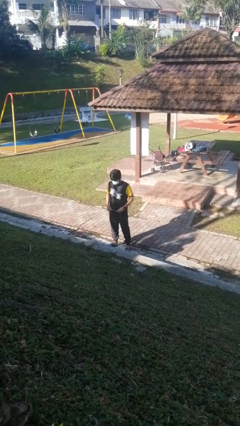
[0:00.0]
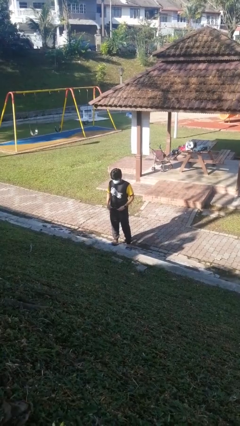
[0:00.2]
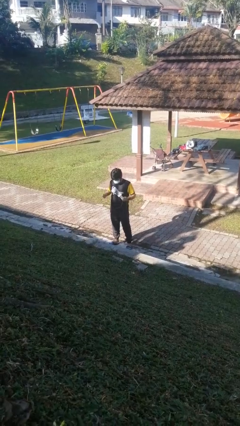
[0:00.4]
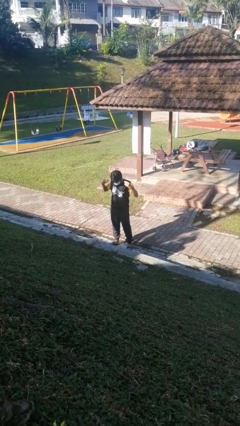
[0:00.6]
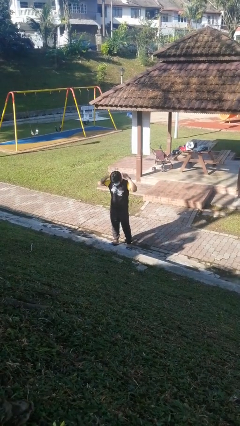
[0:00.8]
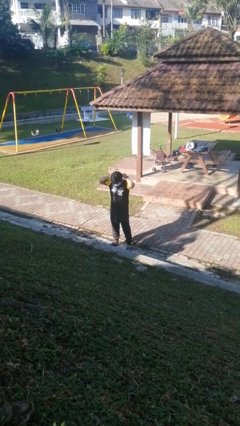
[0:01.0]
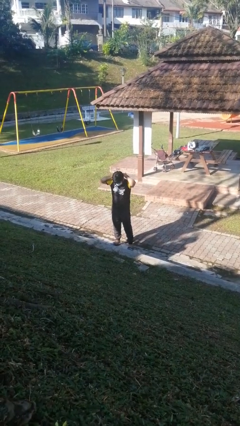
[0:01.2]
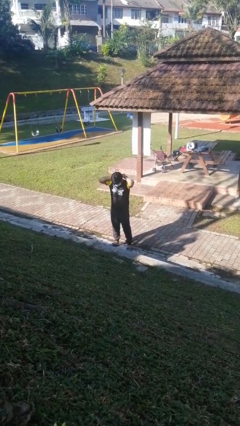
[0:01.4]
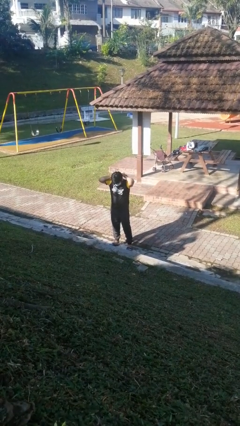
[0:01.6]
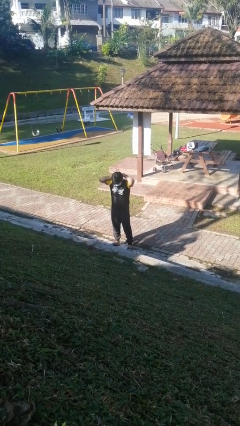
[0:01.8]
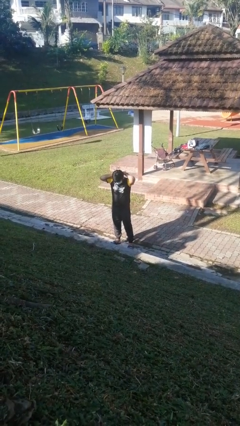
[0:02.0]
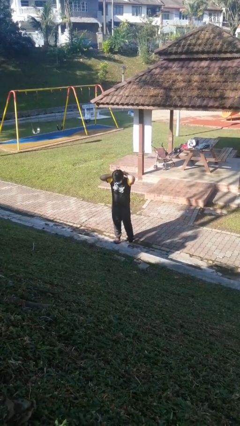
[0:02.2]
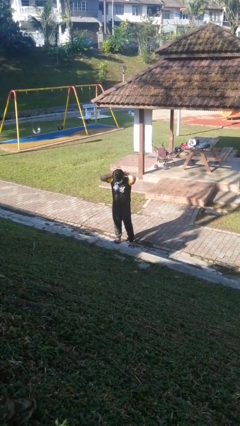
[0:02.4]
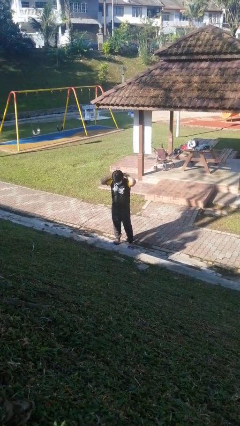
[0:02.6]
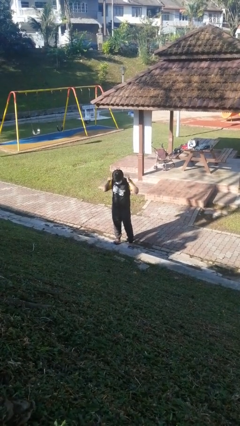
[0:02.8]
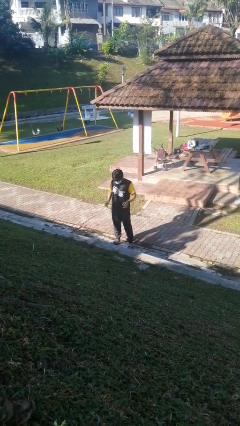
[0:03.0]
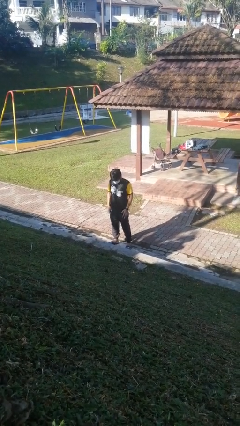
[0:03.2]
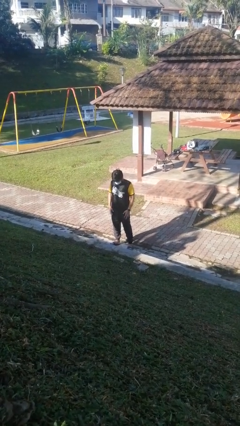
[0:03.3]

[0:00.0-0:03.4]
person puts on necklace

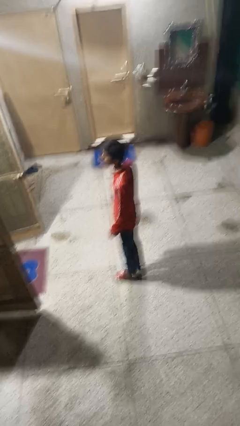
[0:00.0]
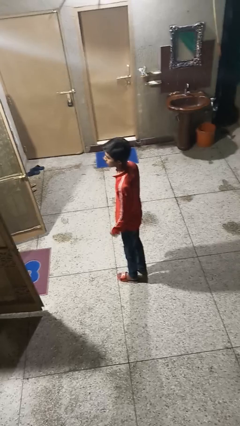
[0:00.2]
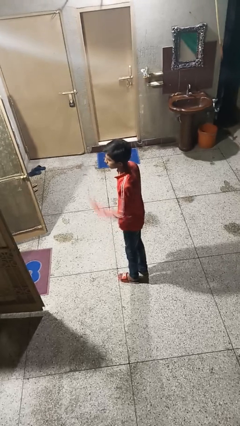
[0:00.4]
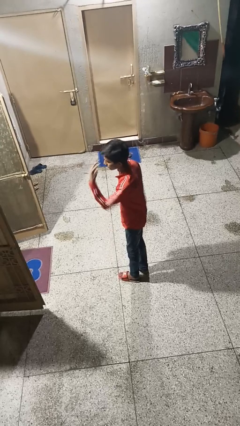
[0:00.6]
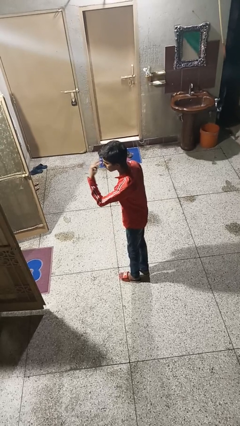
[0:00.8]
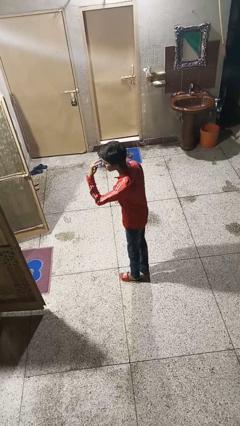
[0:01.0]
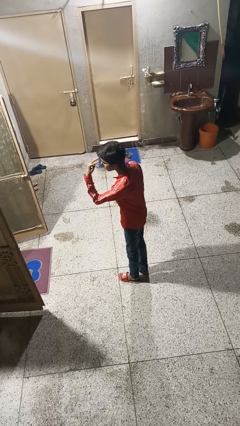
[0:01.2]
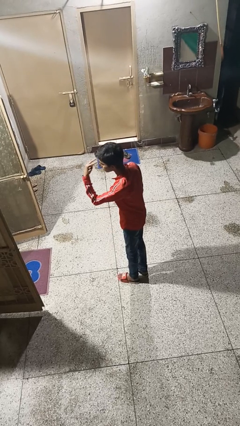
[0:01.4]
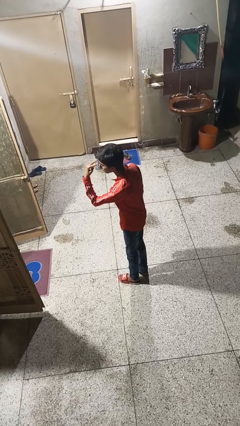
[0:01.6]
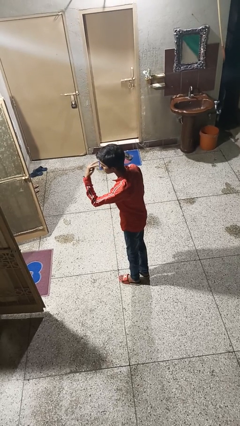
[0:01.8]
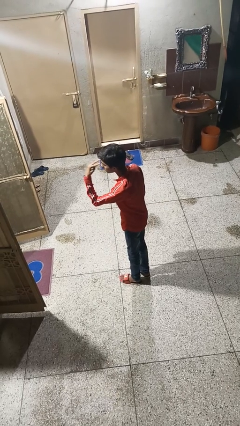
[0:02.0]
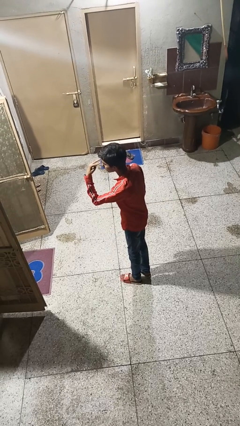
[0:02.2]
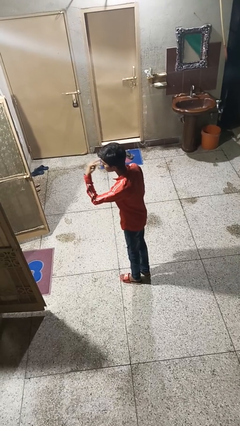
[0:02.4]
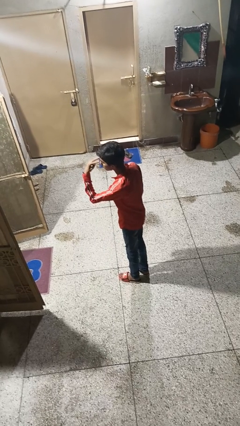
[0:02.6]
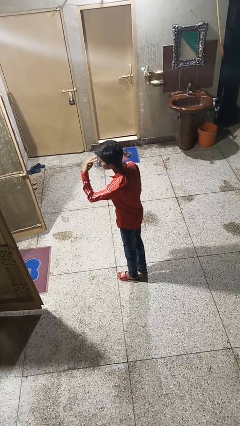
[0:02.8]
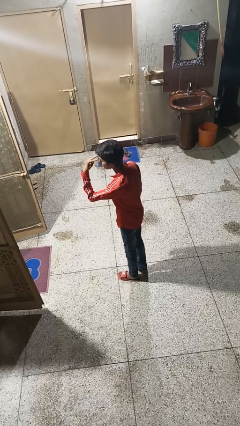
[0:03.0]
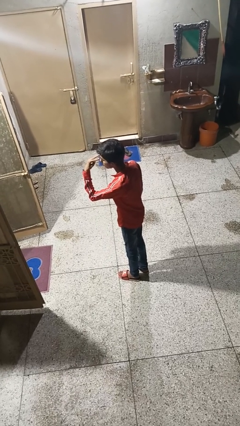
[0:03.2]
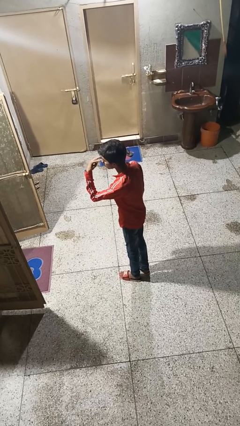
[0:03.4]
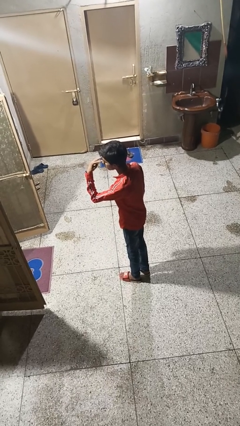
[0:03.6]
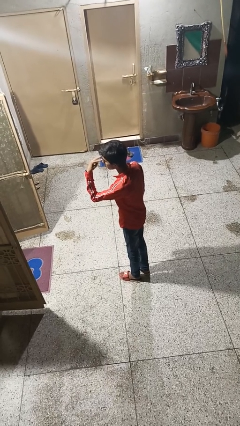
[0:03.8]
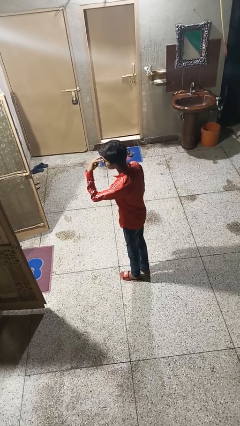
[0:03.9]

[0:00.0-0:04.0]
person gestures watch closely

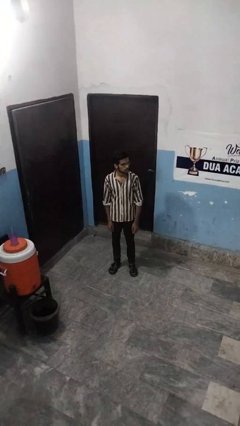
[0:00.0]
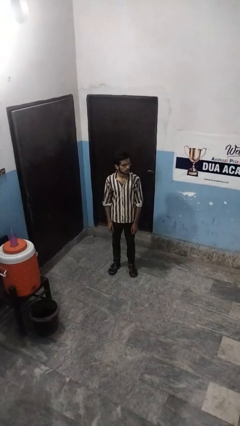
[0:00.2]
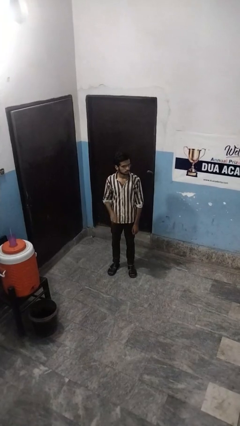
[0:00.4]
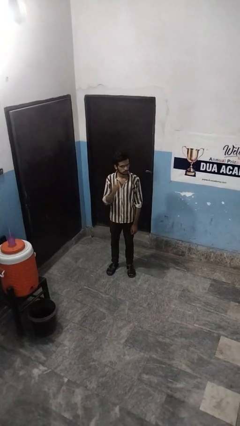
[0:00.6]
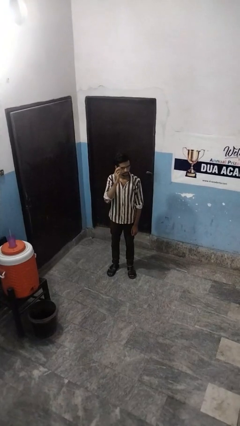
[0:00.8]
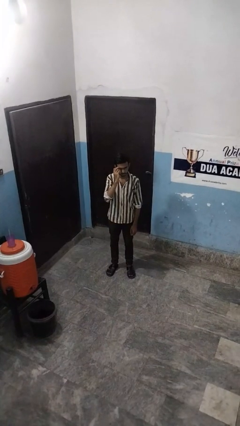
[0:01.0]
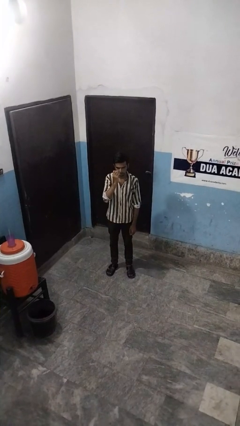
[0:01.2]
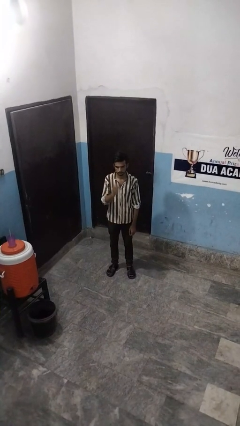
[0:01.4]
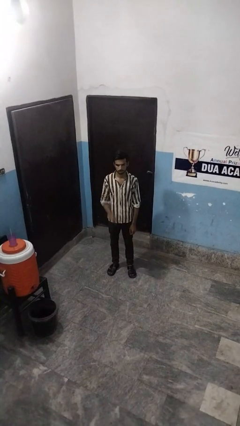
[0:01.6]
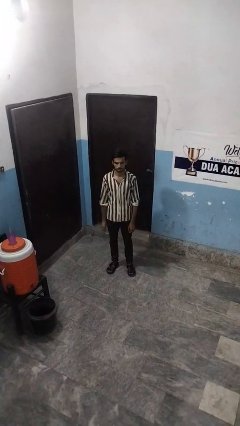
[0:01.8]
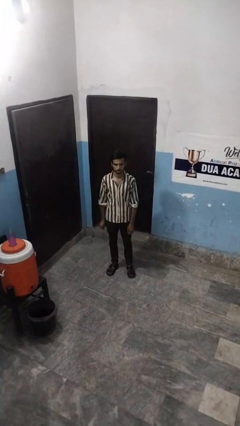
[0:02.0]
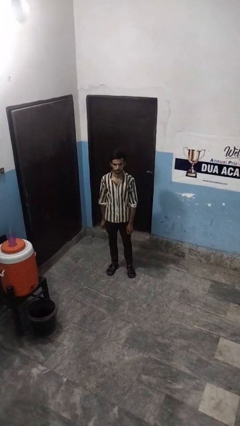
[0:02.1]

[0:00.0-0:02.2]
person takes off glasses

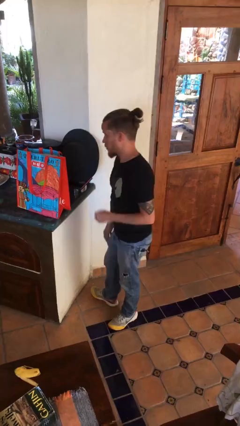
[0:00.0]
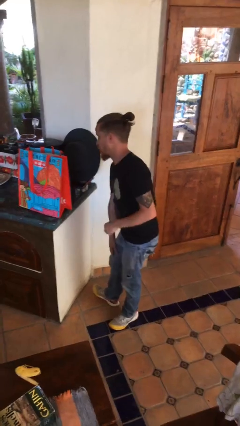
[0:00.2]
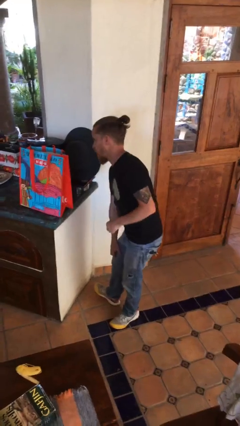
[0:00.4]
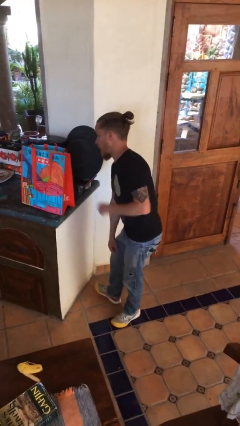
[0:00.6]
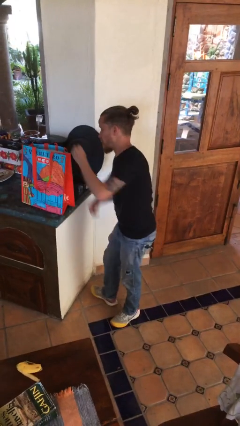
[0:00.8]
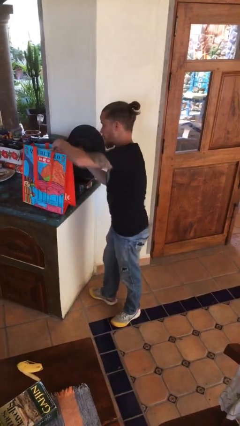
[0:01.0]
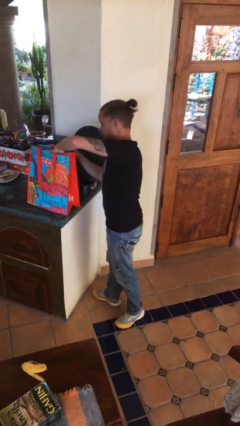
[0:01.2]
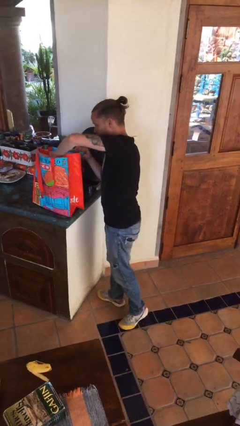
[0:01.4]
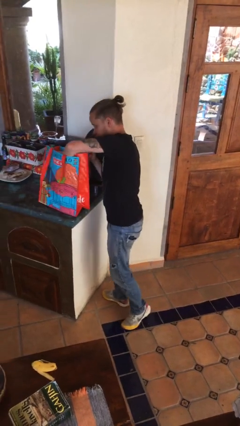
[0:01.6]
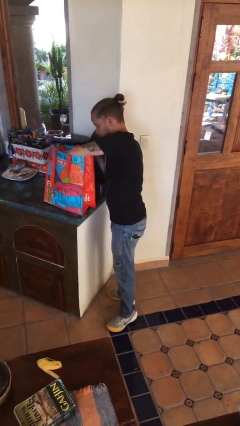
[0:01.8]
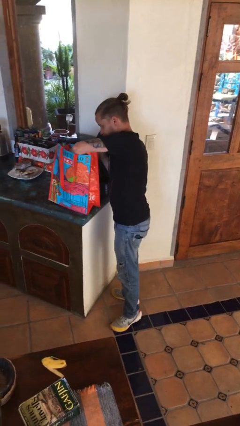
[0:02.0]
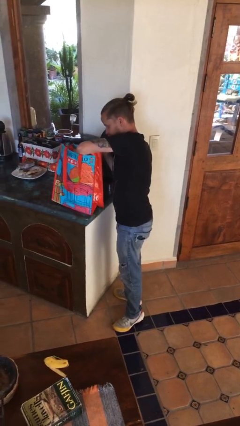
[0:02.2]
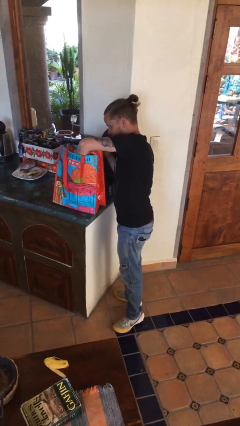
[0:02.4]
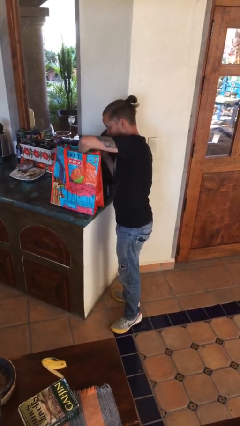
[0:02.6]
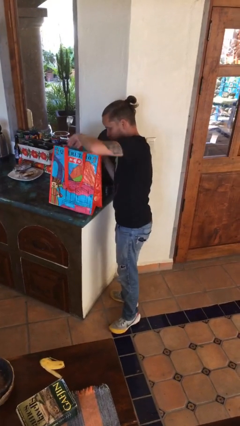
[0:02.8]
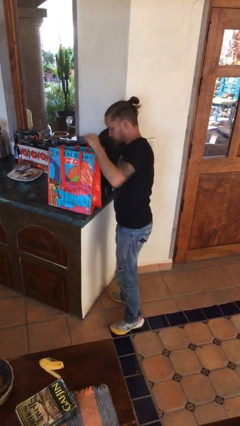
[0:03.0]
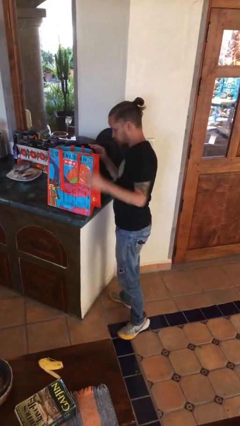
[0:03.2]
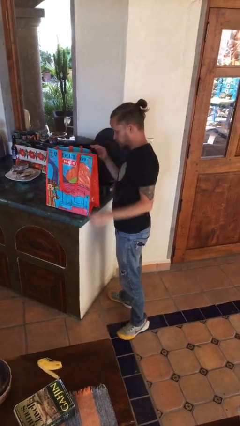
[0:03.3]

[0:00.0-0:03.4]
person searches in bag

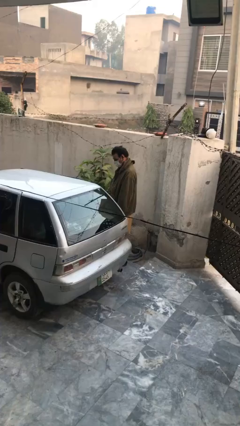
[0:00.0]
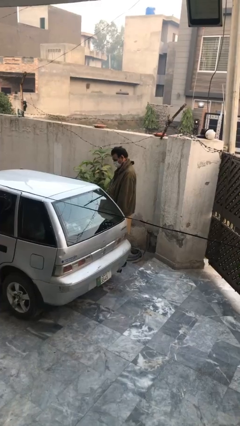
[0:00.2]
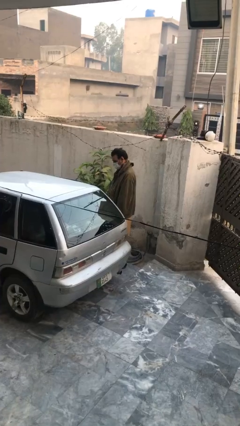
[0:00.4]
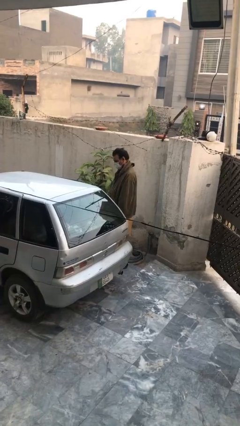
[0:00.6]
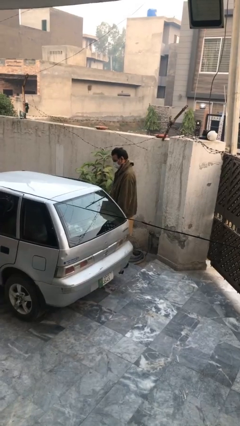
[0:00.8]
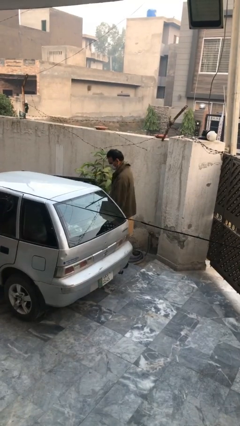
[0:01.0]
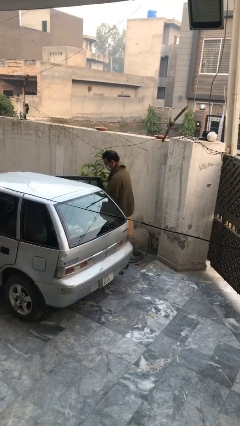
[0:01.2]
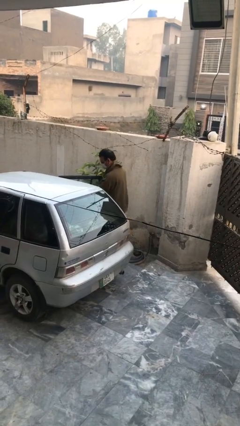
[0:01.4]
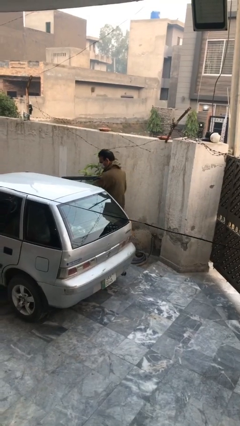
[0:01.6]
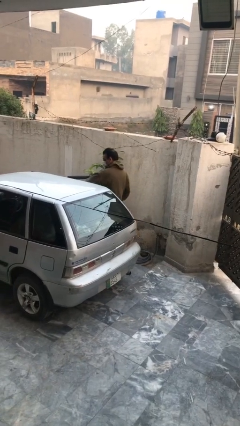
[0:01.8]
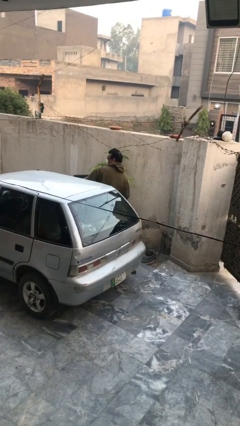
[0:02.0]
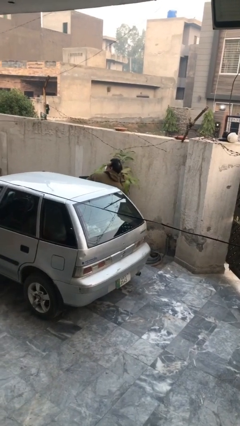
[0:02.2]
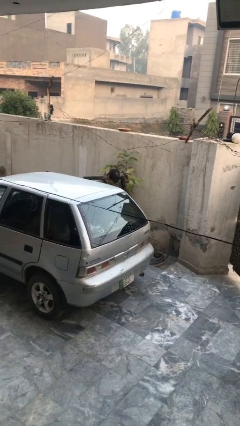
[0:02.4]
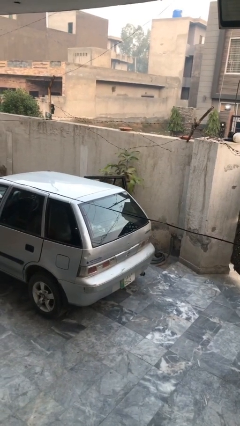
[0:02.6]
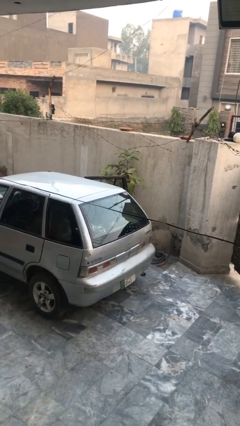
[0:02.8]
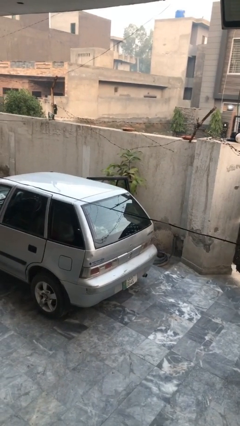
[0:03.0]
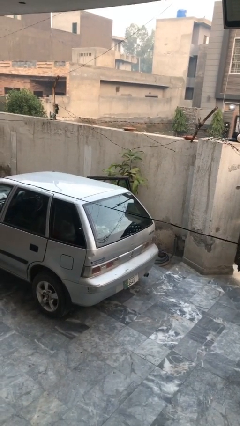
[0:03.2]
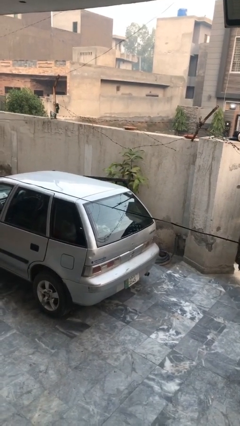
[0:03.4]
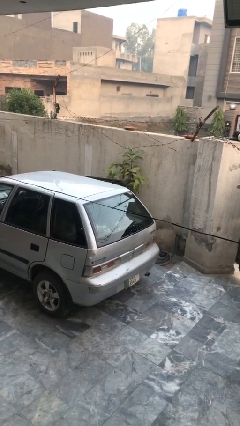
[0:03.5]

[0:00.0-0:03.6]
car picks up person

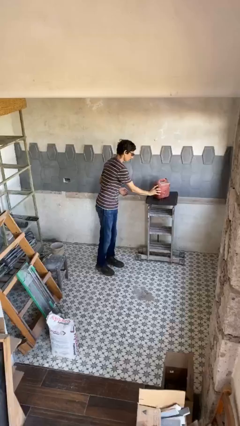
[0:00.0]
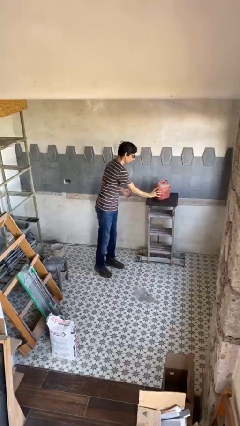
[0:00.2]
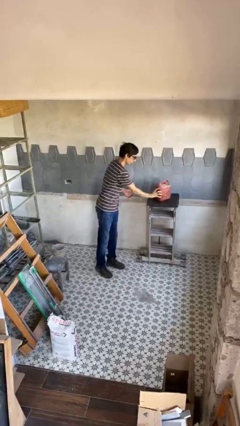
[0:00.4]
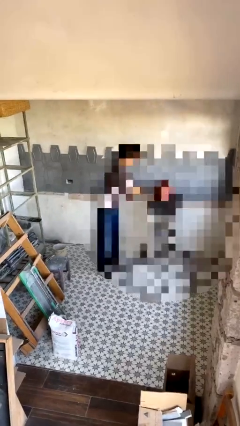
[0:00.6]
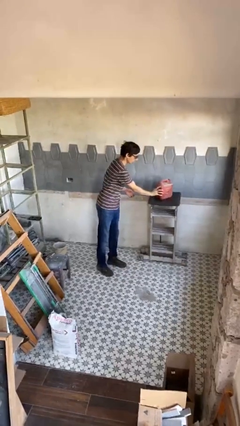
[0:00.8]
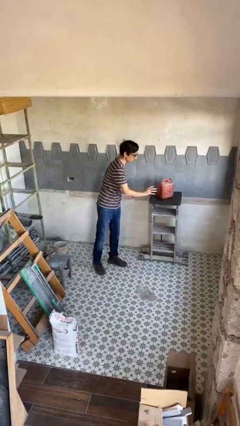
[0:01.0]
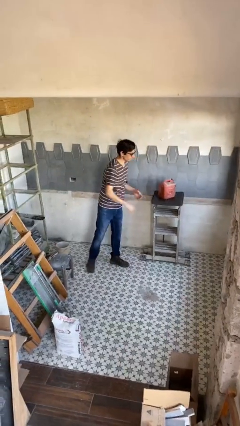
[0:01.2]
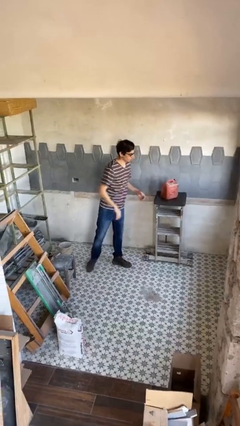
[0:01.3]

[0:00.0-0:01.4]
person puts down object on table
